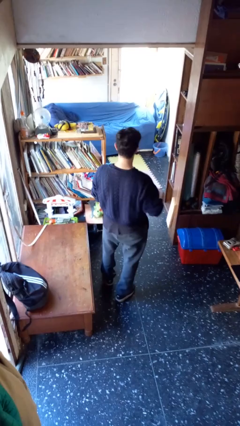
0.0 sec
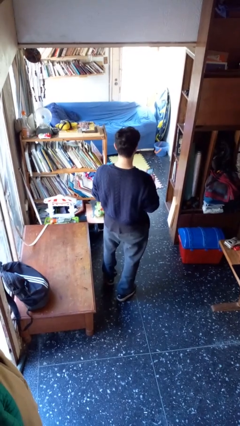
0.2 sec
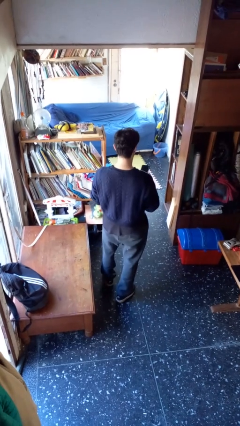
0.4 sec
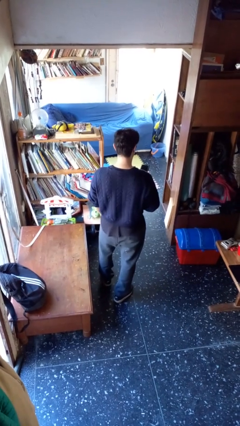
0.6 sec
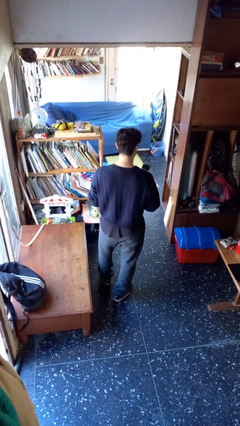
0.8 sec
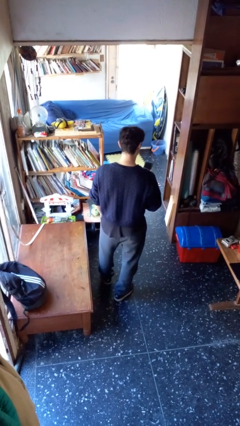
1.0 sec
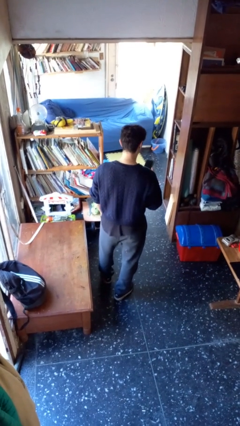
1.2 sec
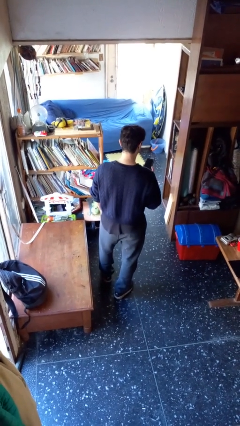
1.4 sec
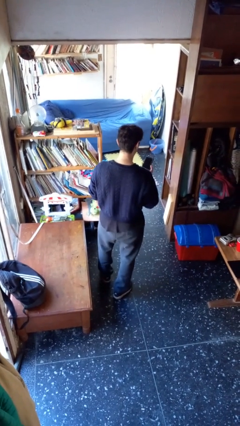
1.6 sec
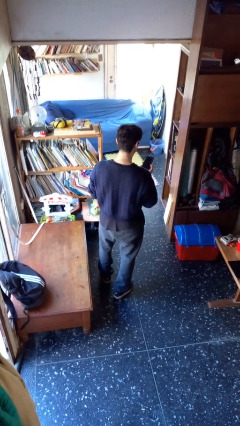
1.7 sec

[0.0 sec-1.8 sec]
person takes phone from pocket

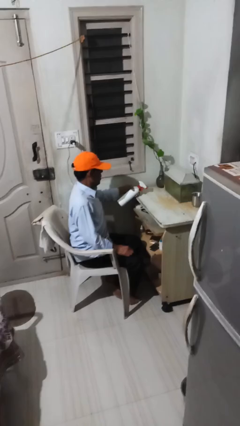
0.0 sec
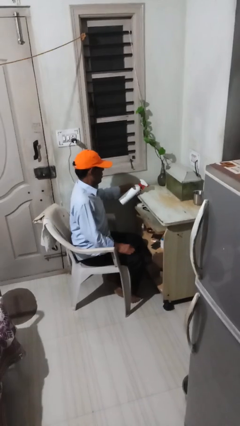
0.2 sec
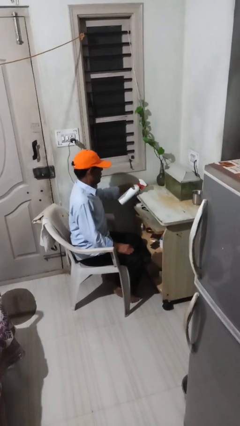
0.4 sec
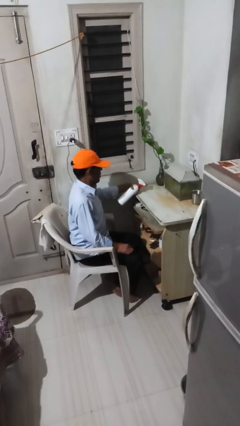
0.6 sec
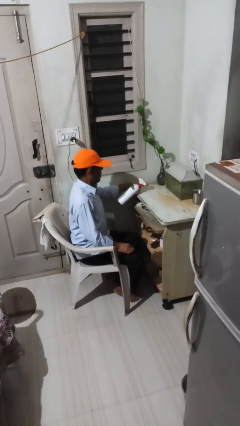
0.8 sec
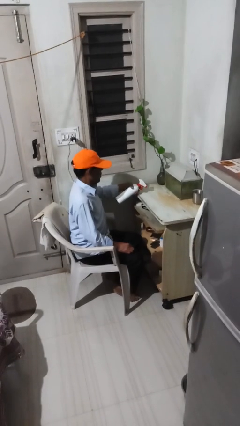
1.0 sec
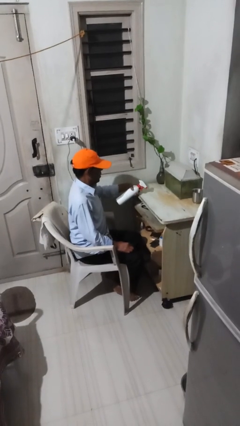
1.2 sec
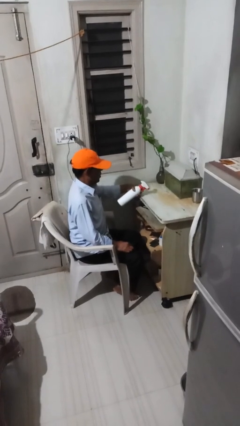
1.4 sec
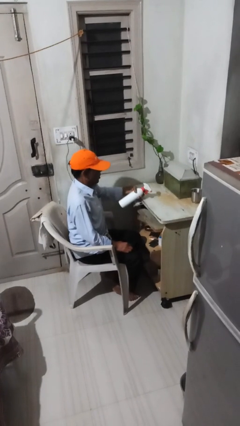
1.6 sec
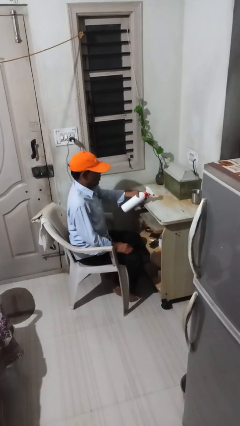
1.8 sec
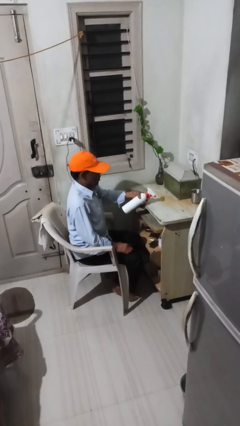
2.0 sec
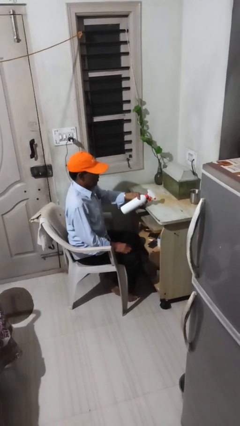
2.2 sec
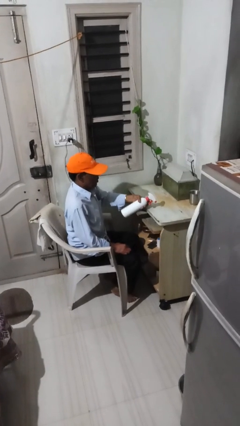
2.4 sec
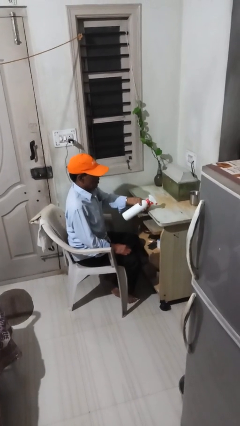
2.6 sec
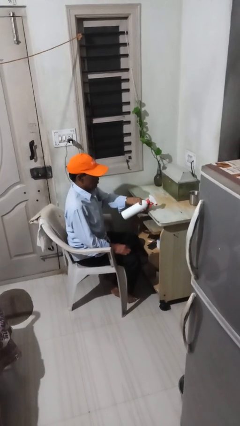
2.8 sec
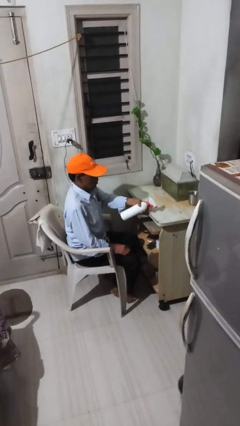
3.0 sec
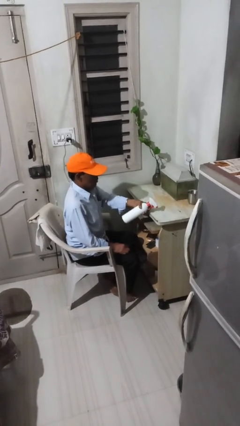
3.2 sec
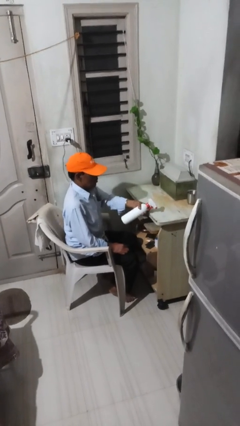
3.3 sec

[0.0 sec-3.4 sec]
person sprays from bottle

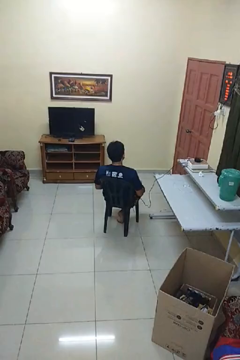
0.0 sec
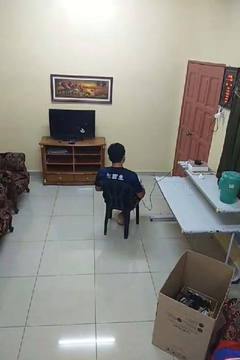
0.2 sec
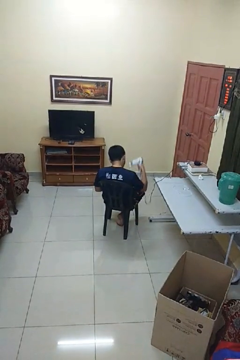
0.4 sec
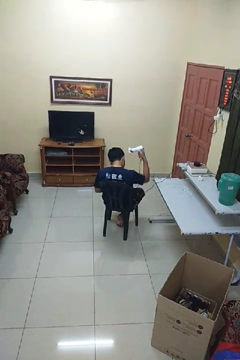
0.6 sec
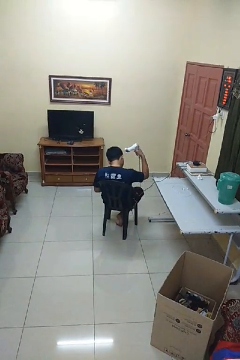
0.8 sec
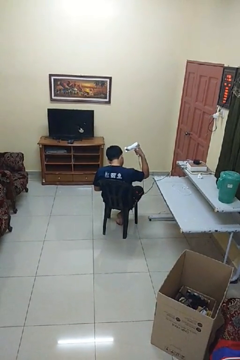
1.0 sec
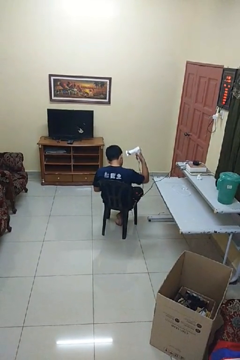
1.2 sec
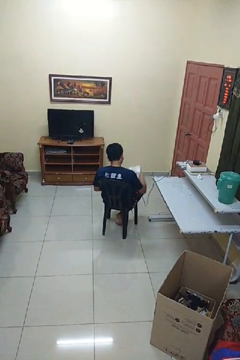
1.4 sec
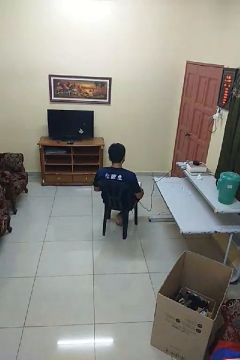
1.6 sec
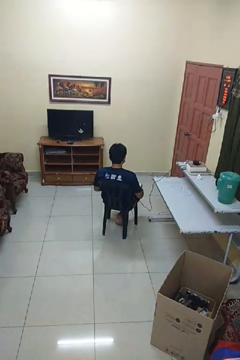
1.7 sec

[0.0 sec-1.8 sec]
person dries hair with hairdryer

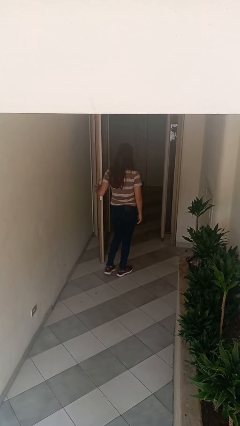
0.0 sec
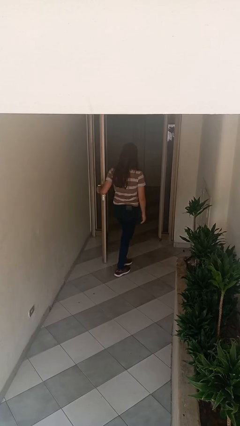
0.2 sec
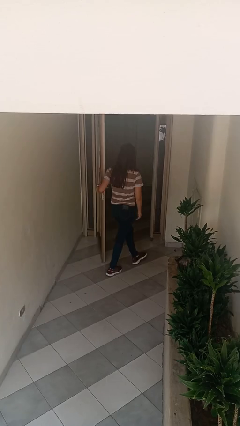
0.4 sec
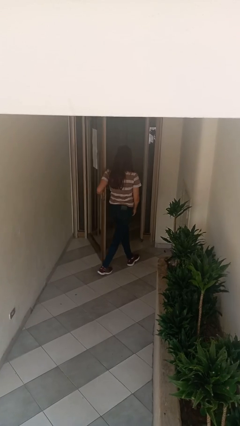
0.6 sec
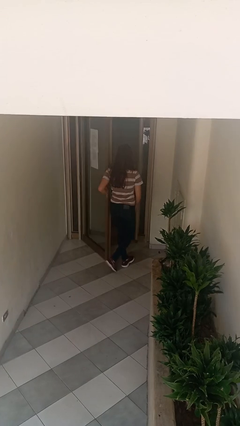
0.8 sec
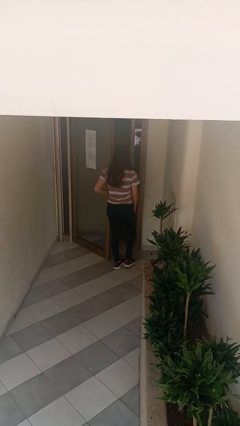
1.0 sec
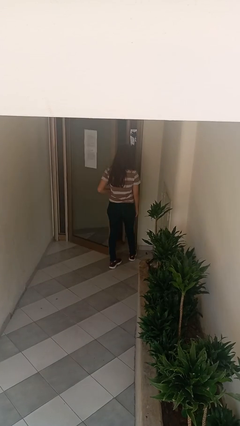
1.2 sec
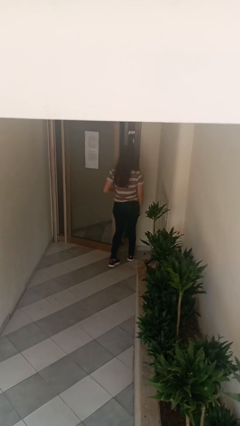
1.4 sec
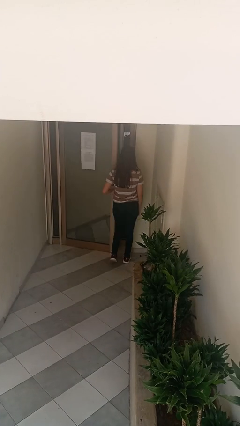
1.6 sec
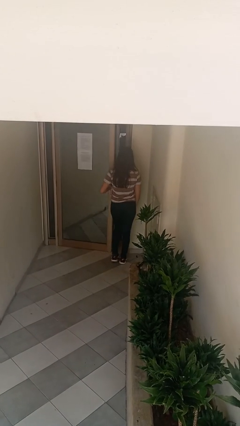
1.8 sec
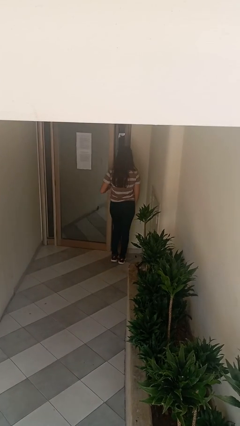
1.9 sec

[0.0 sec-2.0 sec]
person closes facility door

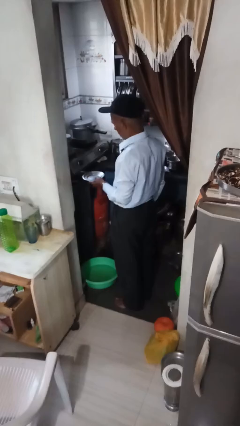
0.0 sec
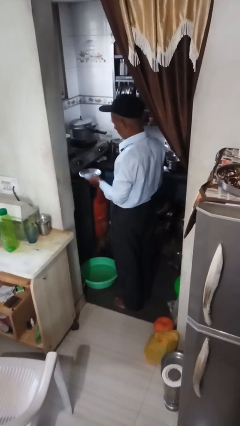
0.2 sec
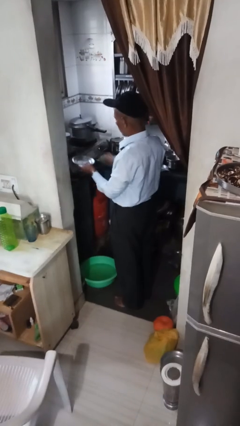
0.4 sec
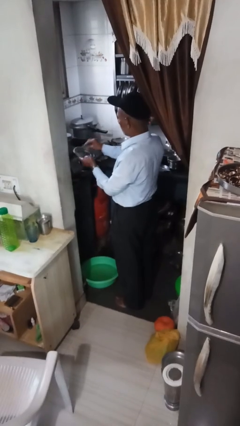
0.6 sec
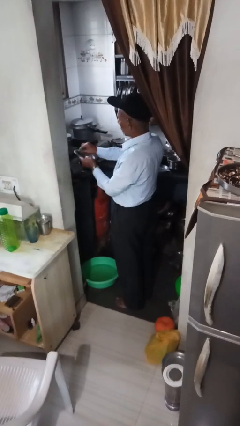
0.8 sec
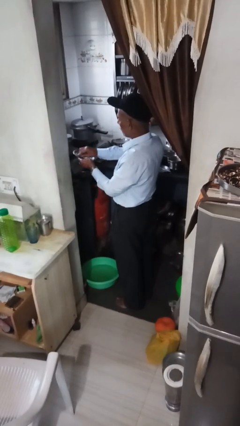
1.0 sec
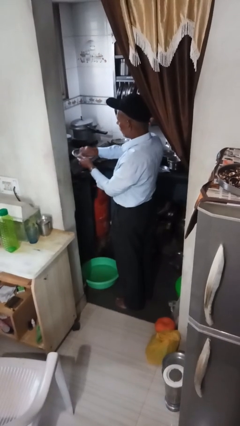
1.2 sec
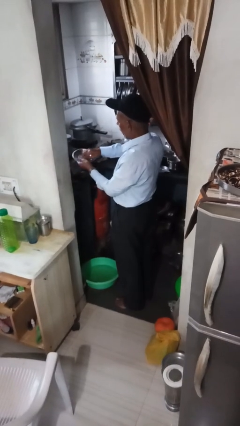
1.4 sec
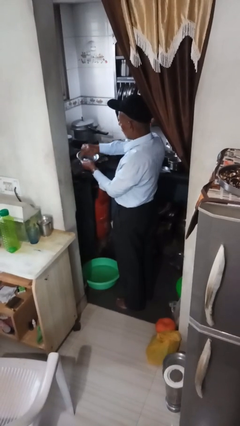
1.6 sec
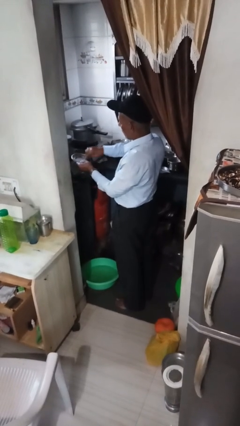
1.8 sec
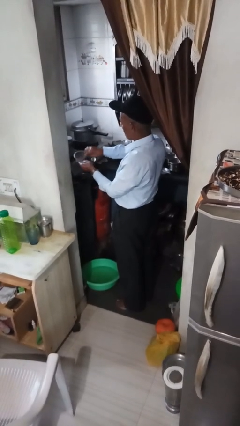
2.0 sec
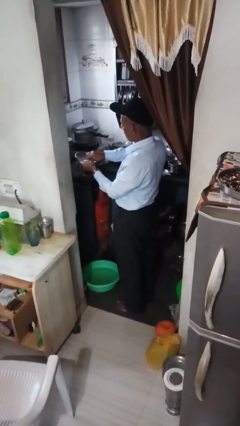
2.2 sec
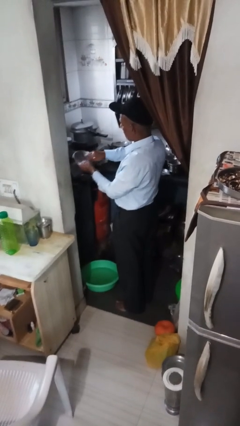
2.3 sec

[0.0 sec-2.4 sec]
person washes dish

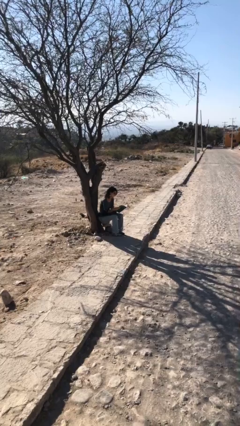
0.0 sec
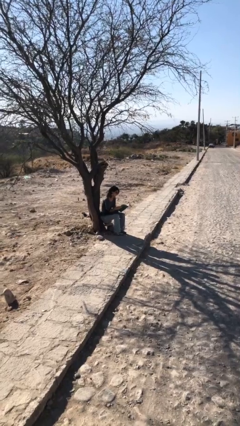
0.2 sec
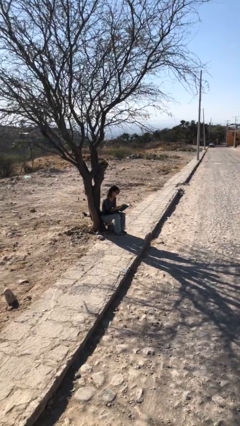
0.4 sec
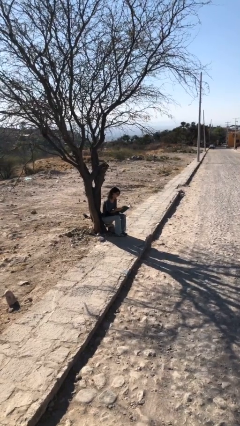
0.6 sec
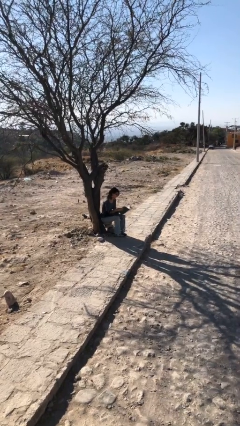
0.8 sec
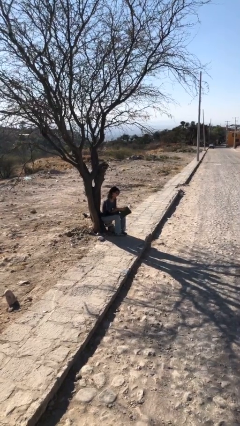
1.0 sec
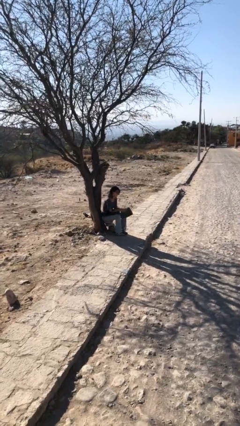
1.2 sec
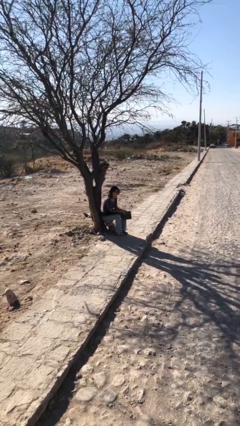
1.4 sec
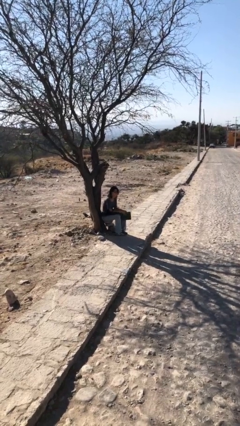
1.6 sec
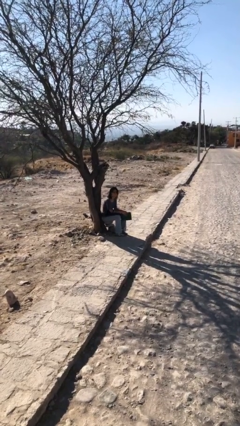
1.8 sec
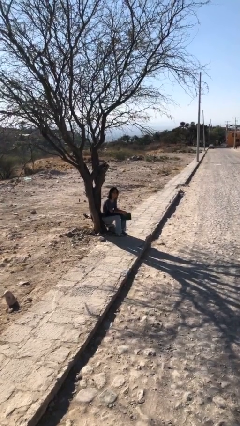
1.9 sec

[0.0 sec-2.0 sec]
person reads document

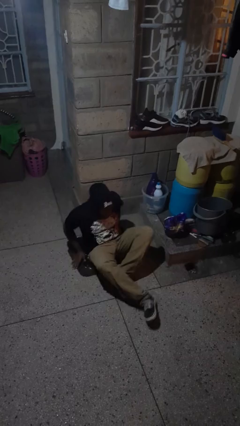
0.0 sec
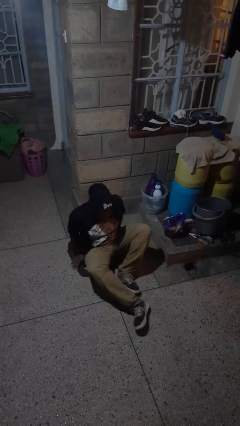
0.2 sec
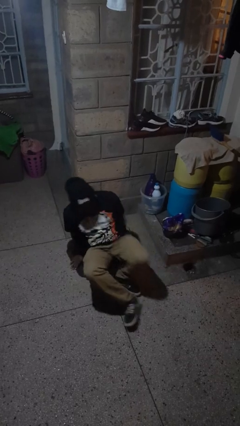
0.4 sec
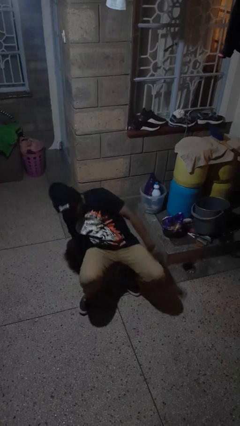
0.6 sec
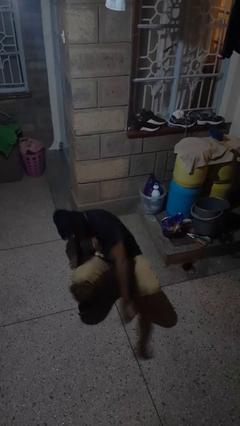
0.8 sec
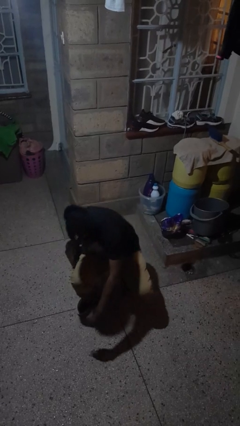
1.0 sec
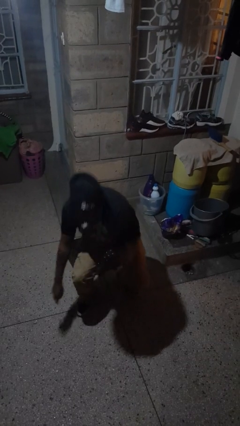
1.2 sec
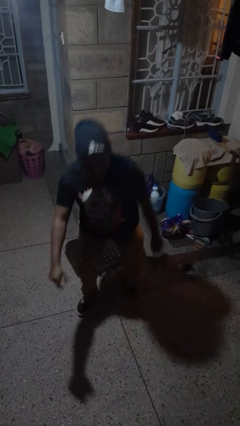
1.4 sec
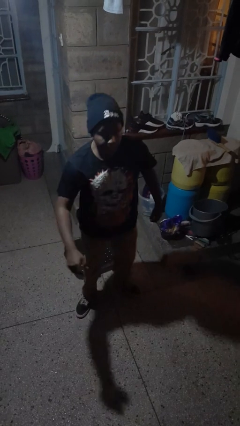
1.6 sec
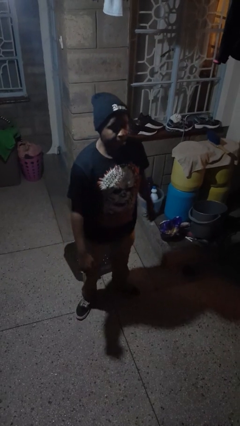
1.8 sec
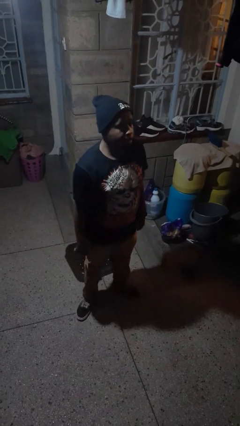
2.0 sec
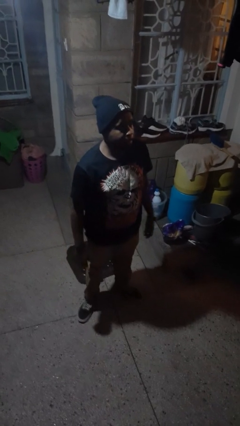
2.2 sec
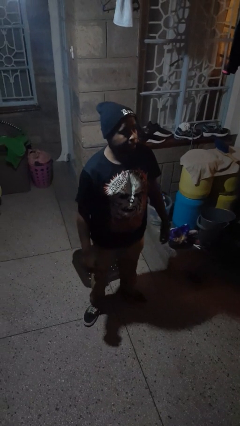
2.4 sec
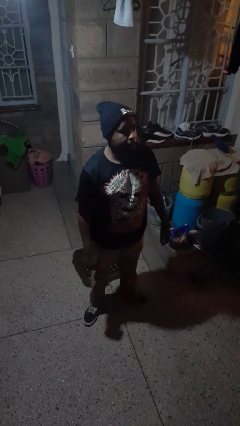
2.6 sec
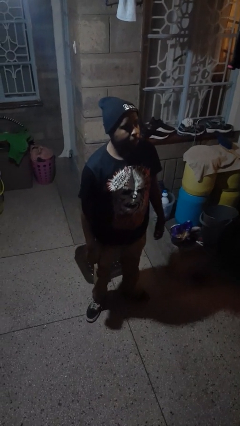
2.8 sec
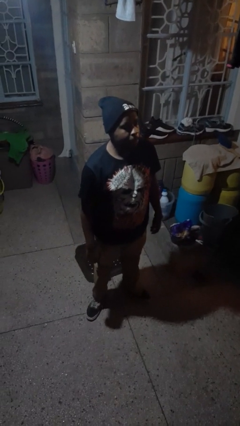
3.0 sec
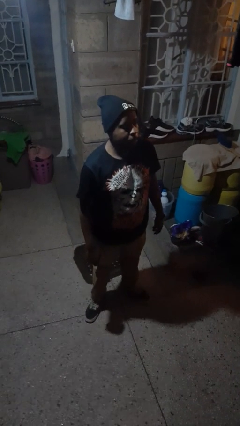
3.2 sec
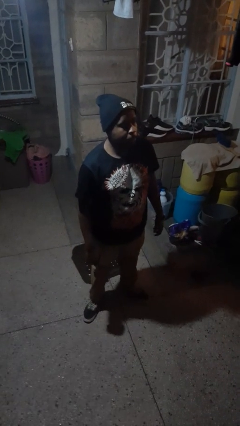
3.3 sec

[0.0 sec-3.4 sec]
person stands up from floor
